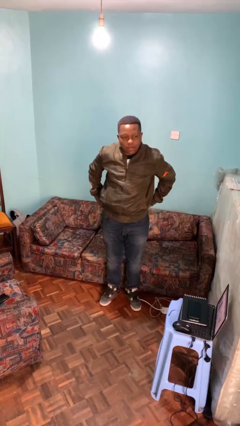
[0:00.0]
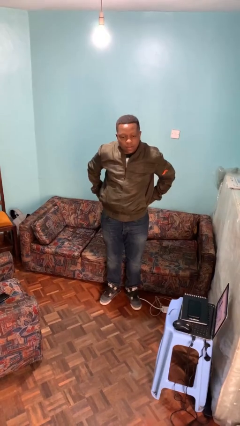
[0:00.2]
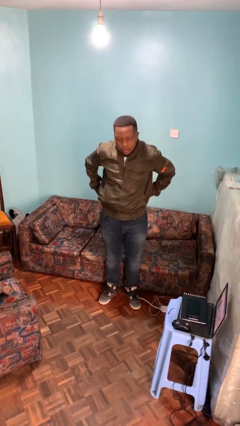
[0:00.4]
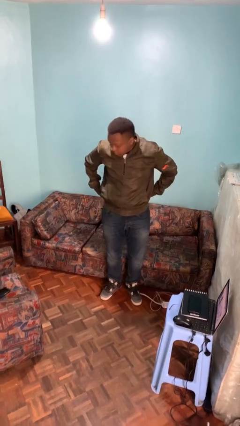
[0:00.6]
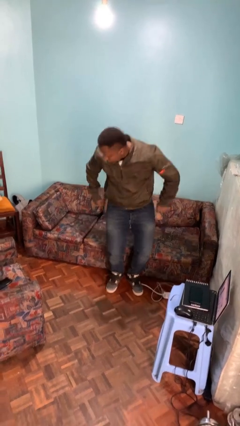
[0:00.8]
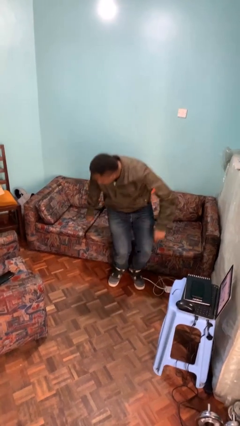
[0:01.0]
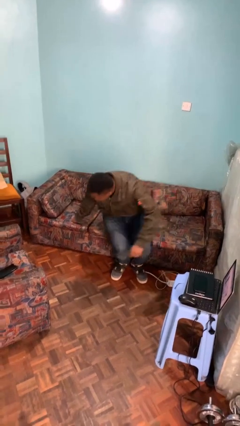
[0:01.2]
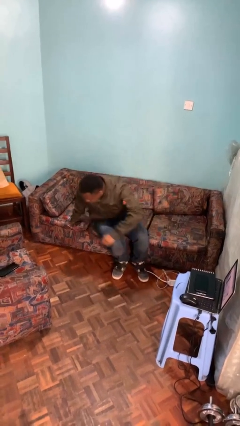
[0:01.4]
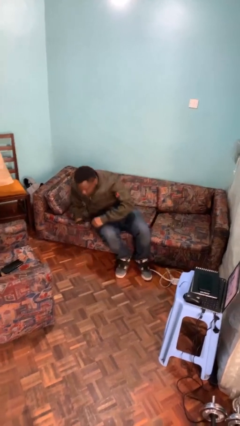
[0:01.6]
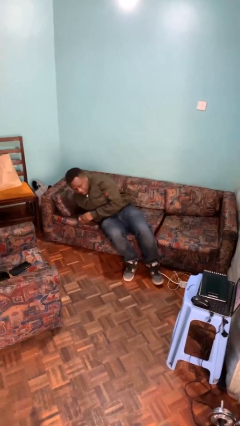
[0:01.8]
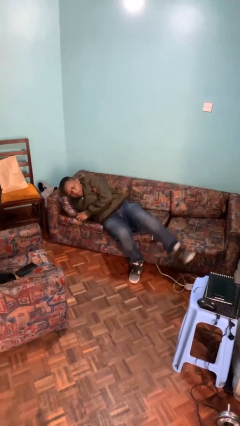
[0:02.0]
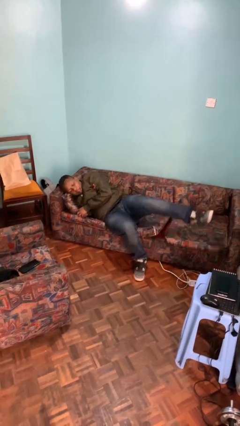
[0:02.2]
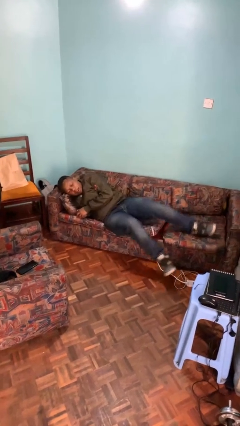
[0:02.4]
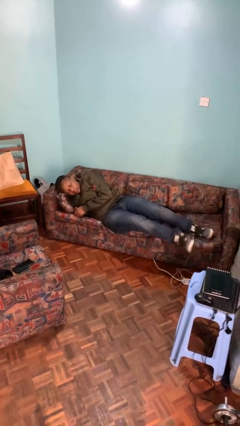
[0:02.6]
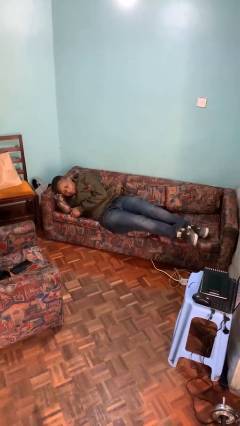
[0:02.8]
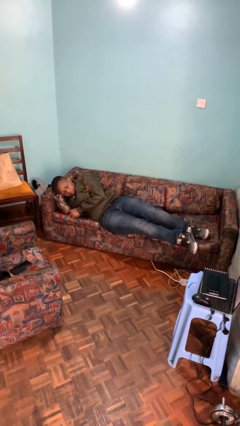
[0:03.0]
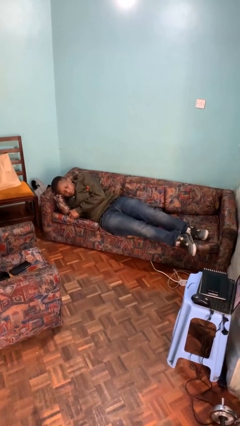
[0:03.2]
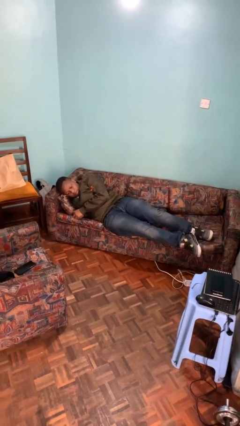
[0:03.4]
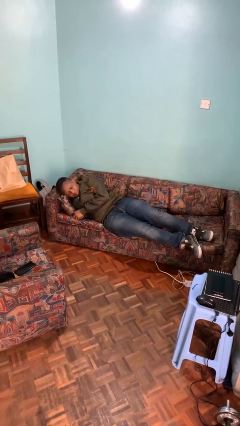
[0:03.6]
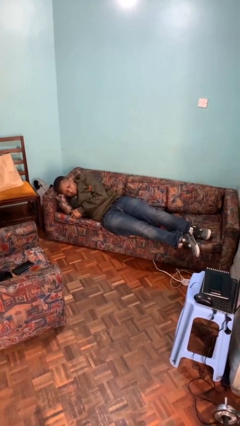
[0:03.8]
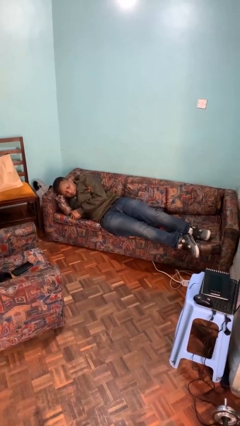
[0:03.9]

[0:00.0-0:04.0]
person lies down on couch

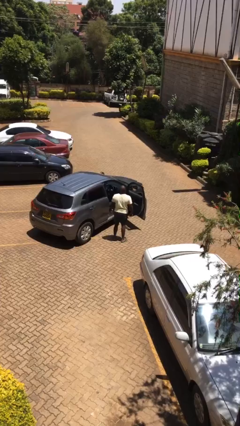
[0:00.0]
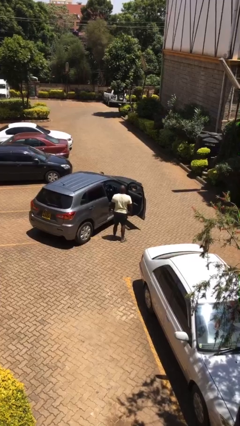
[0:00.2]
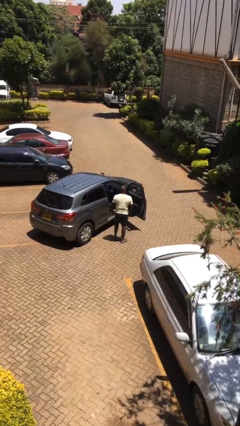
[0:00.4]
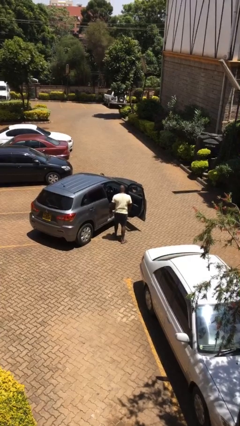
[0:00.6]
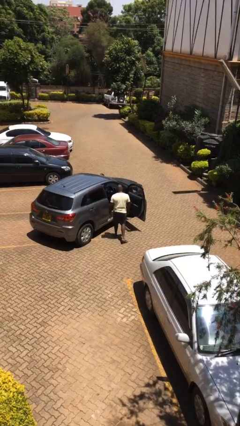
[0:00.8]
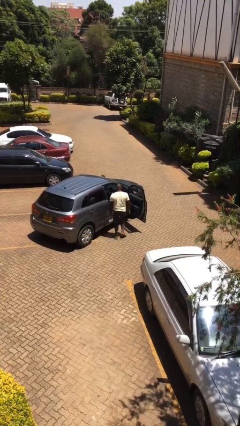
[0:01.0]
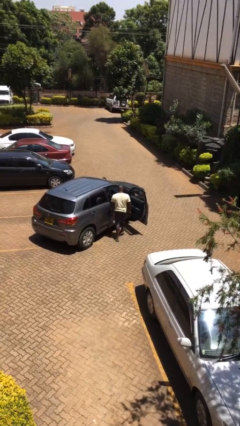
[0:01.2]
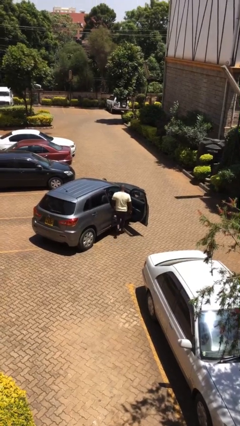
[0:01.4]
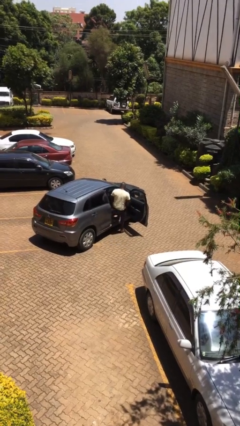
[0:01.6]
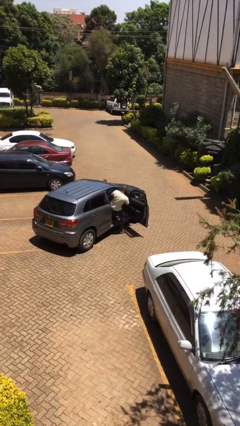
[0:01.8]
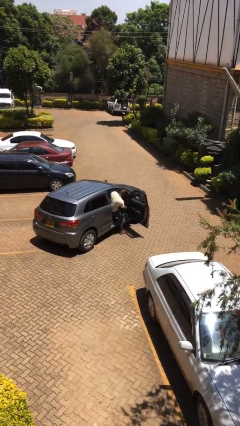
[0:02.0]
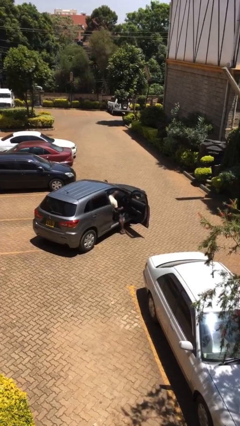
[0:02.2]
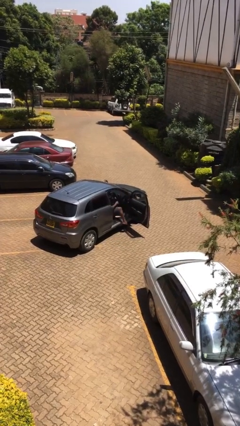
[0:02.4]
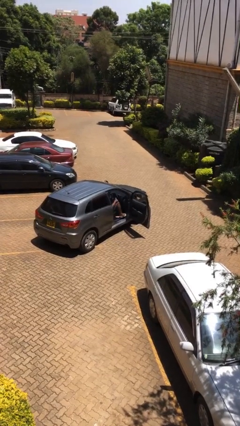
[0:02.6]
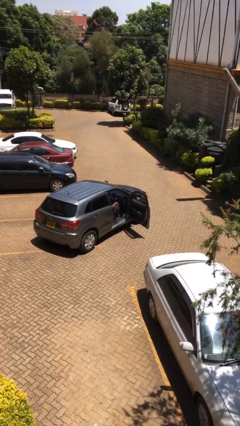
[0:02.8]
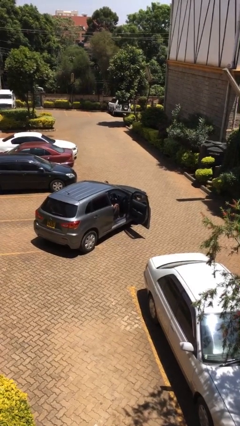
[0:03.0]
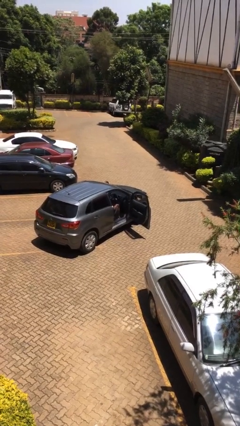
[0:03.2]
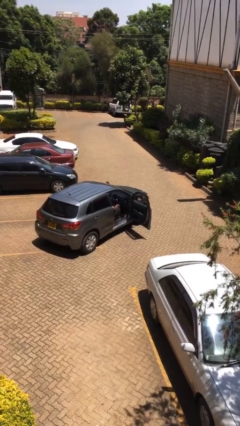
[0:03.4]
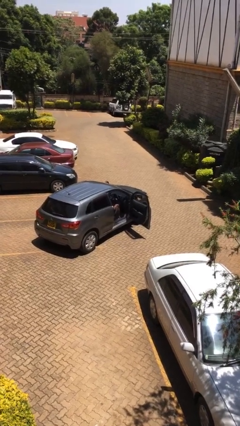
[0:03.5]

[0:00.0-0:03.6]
person enters car

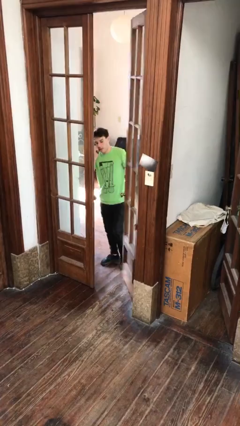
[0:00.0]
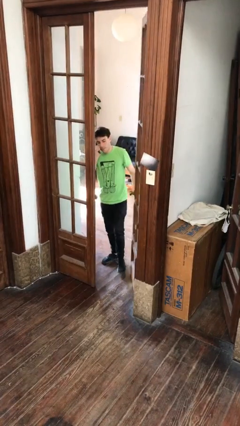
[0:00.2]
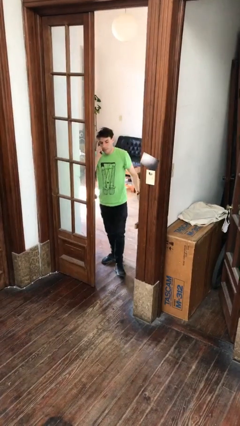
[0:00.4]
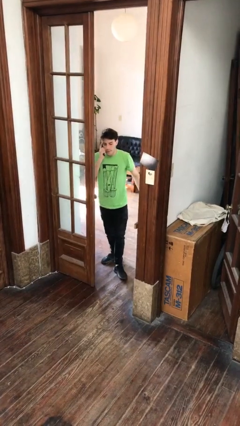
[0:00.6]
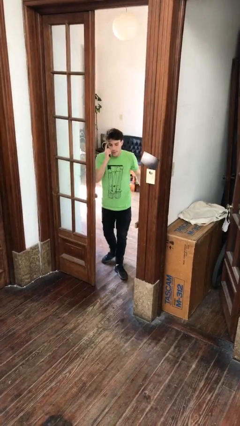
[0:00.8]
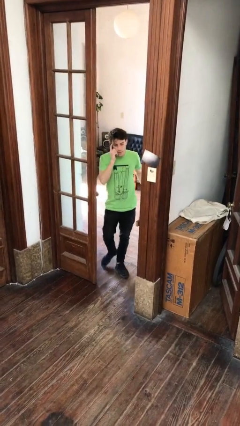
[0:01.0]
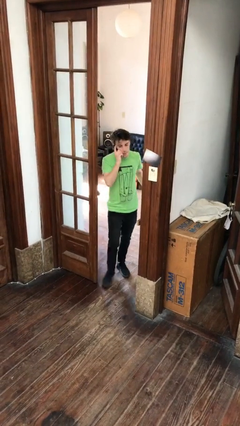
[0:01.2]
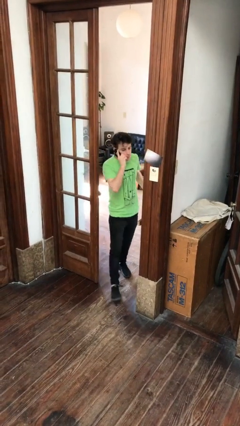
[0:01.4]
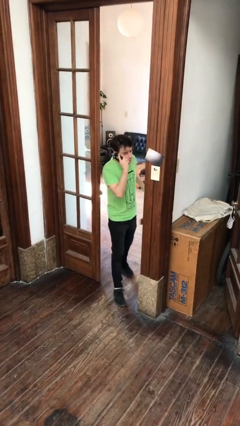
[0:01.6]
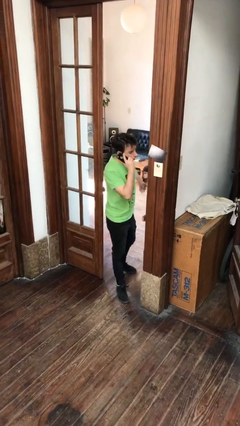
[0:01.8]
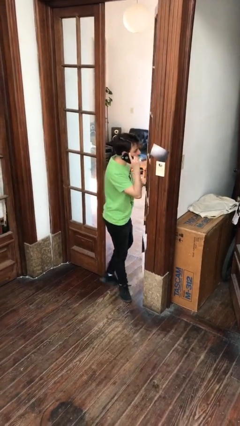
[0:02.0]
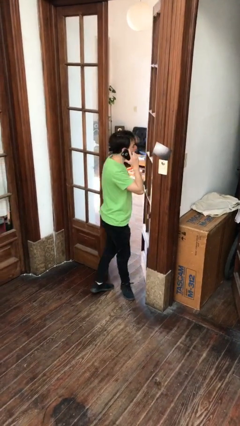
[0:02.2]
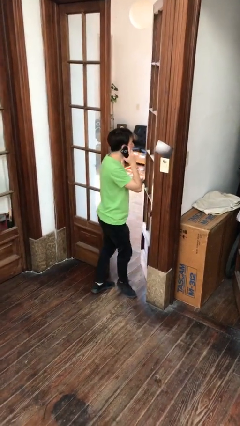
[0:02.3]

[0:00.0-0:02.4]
person enters scene through structure

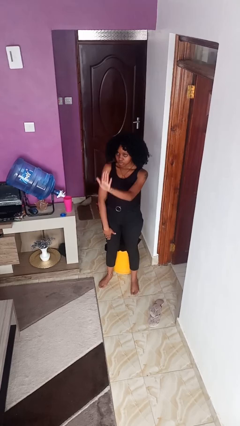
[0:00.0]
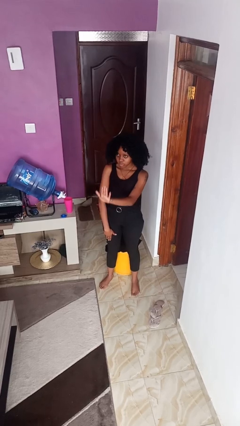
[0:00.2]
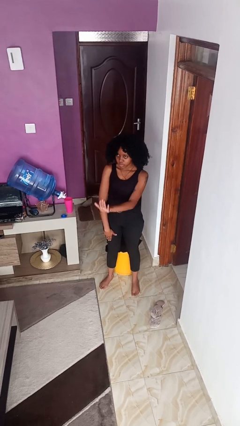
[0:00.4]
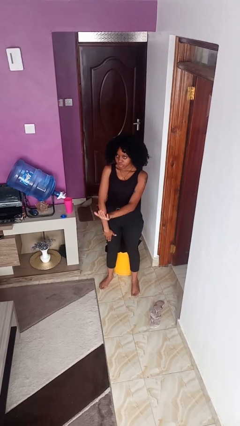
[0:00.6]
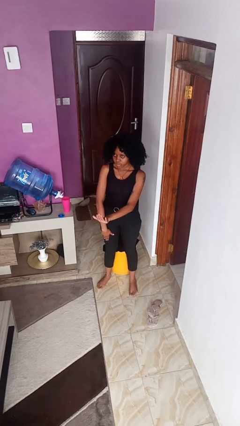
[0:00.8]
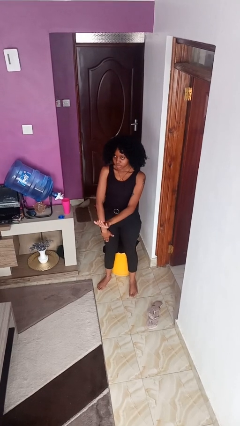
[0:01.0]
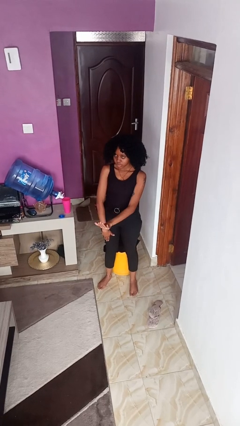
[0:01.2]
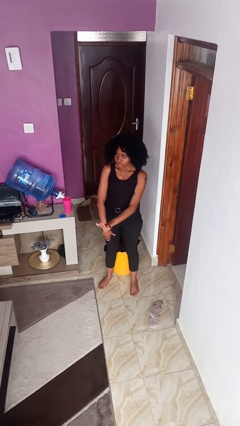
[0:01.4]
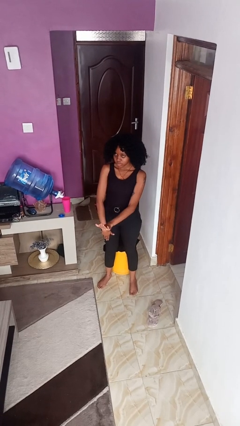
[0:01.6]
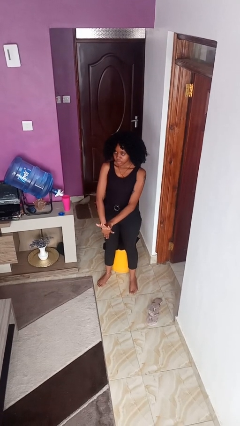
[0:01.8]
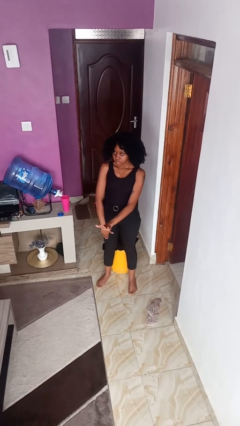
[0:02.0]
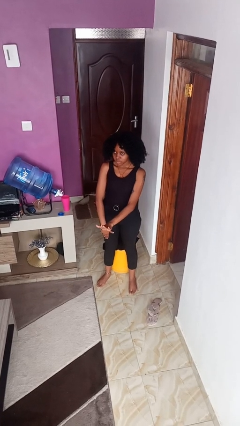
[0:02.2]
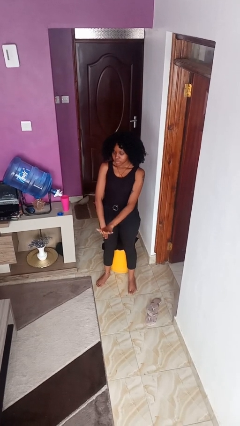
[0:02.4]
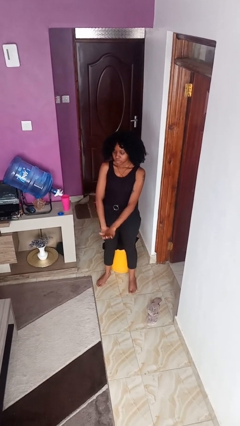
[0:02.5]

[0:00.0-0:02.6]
person gestures swipe down

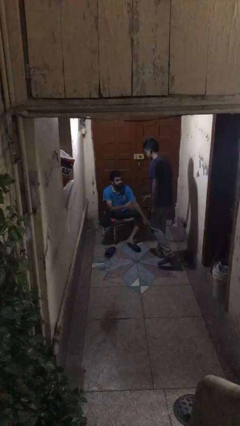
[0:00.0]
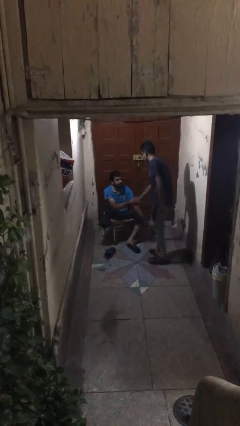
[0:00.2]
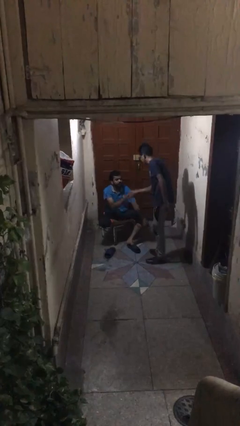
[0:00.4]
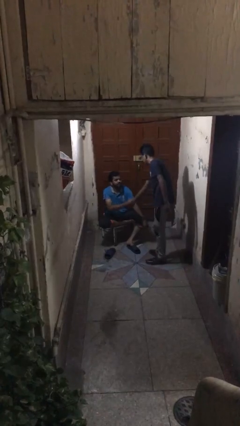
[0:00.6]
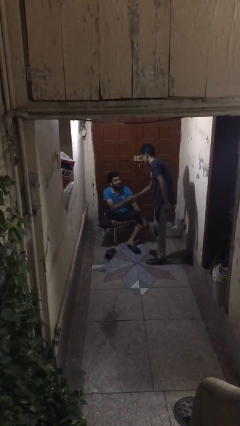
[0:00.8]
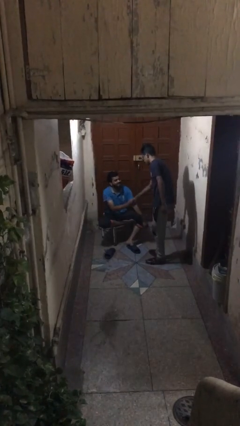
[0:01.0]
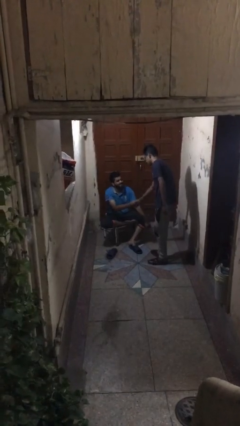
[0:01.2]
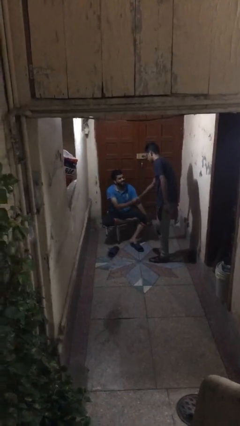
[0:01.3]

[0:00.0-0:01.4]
person shakes hand

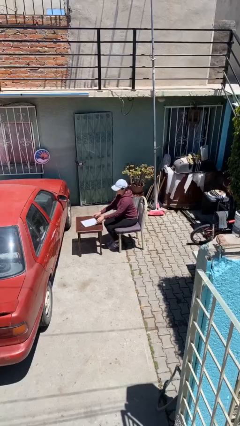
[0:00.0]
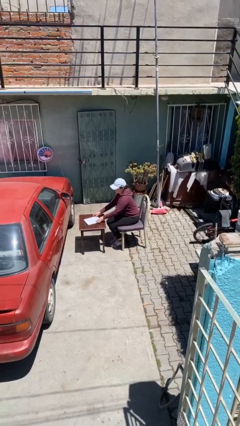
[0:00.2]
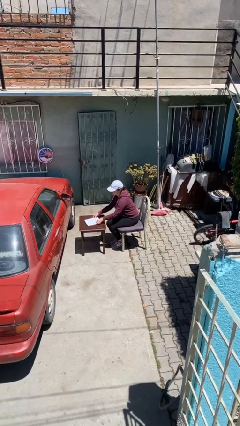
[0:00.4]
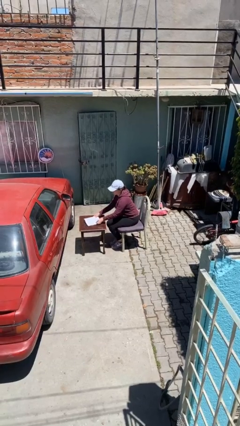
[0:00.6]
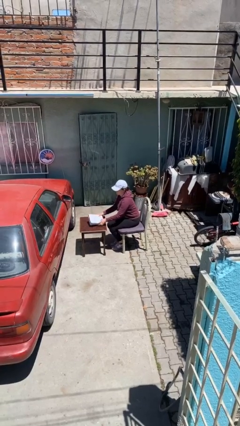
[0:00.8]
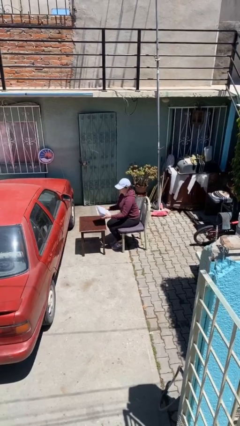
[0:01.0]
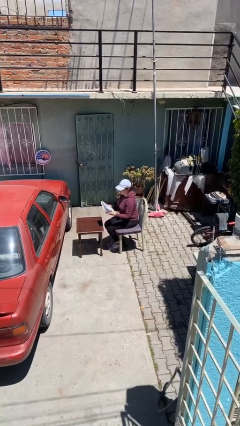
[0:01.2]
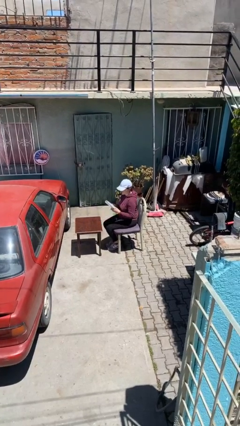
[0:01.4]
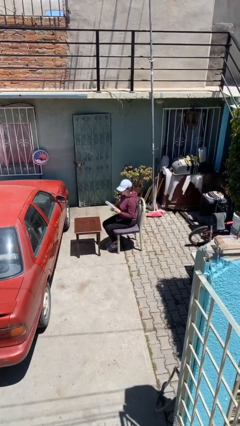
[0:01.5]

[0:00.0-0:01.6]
person picks up object from table

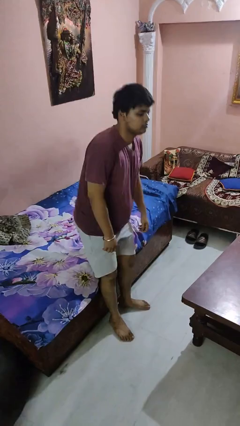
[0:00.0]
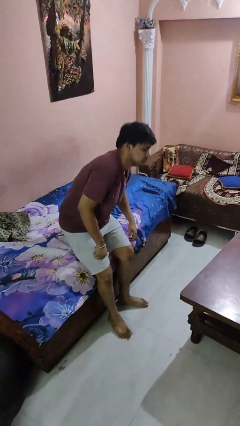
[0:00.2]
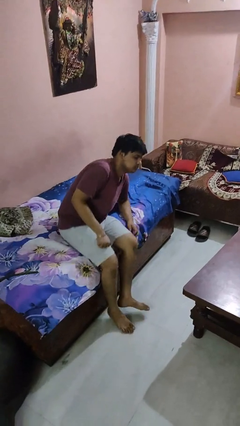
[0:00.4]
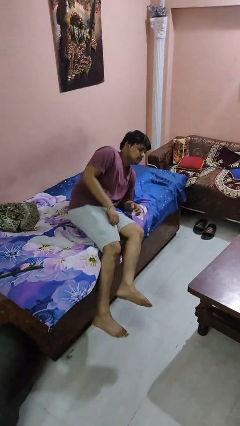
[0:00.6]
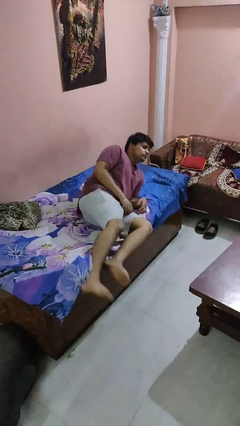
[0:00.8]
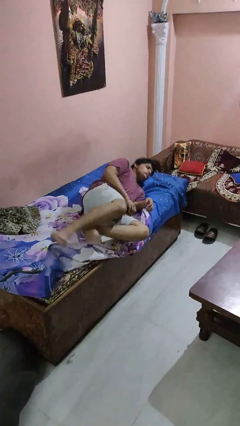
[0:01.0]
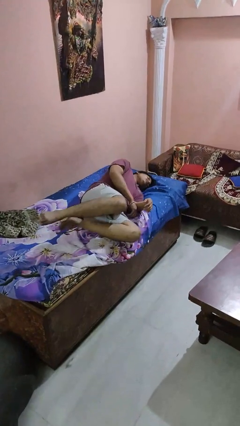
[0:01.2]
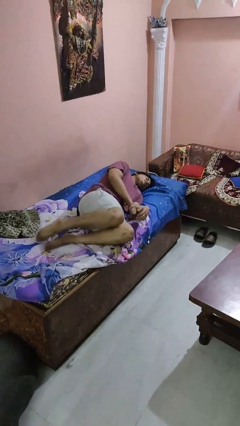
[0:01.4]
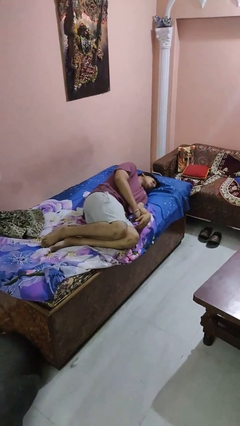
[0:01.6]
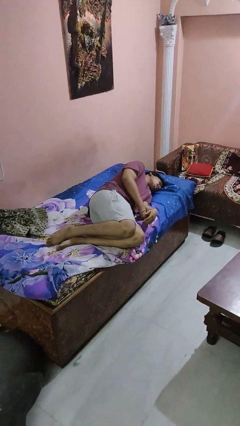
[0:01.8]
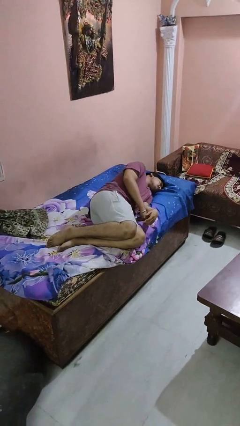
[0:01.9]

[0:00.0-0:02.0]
person lies down on bed
